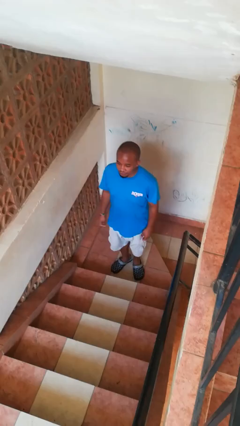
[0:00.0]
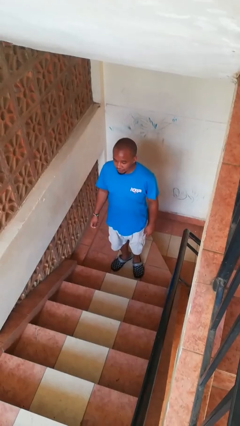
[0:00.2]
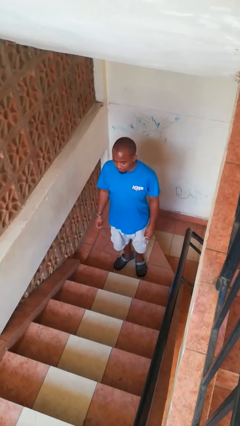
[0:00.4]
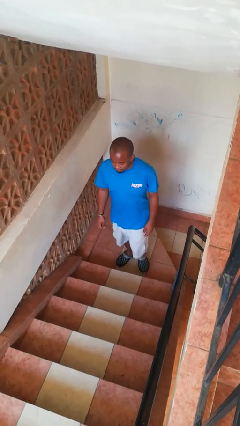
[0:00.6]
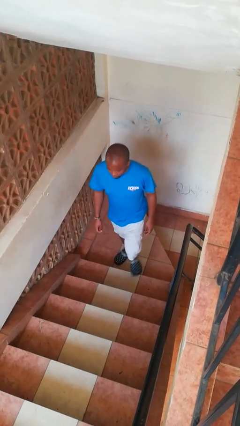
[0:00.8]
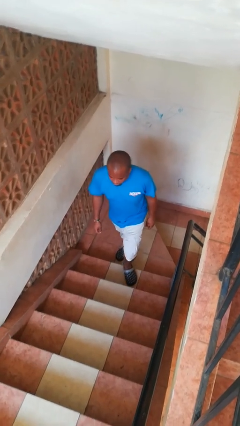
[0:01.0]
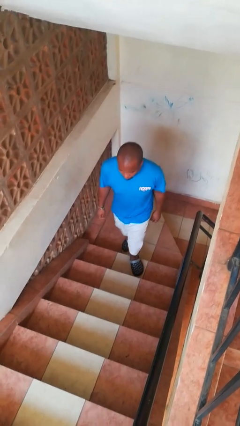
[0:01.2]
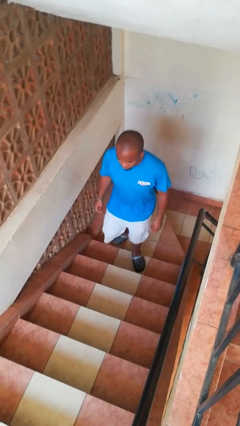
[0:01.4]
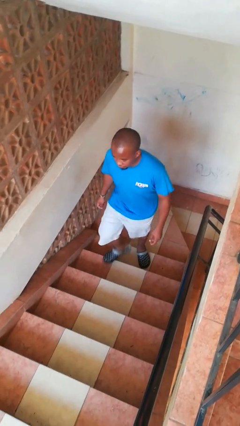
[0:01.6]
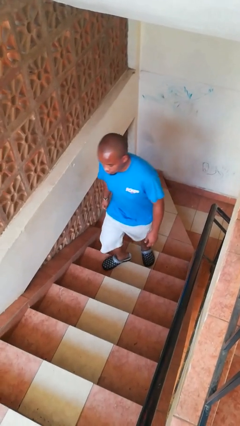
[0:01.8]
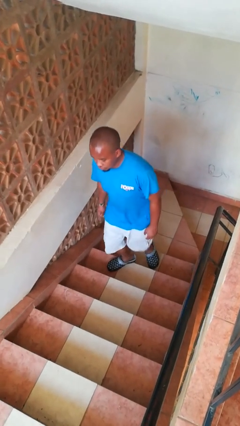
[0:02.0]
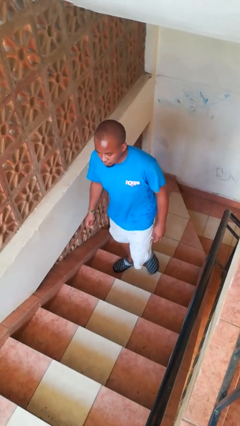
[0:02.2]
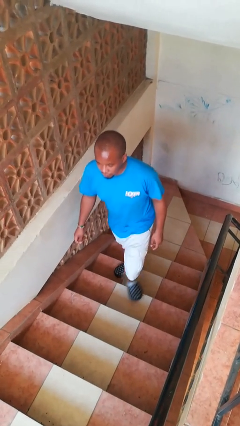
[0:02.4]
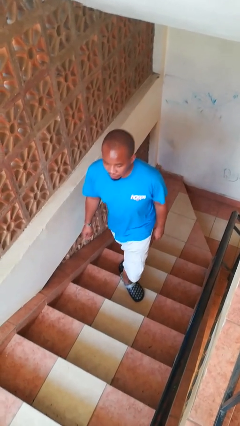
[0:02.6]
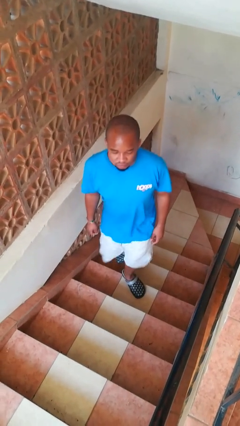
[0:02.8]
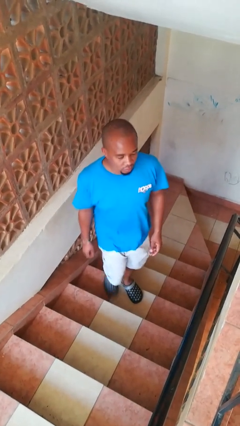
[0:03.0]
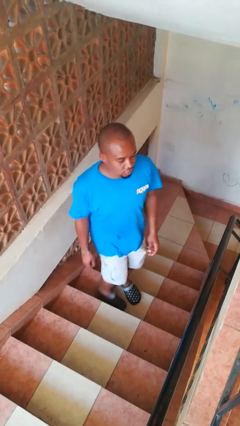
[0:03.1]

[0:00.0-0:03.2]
person climbs up stairs

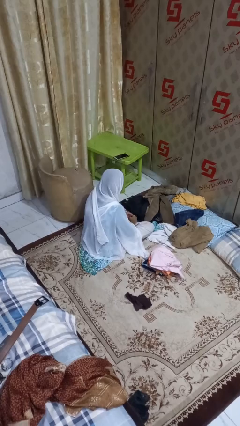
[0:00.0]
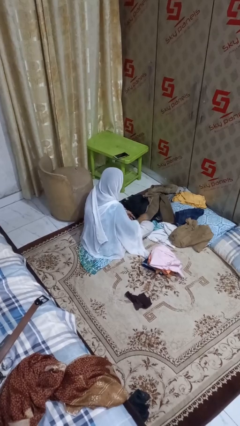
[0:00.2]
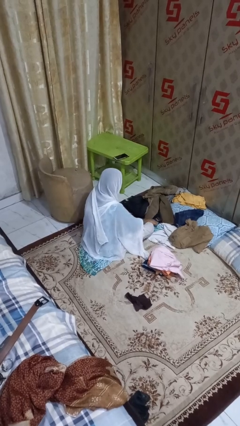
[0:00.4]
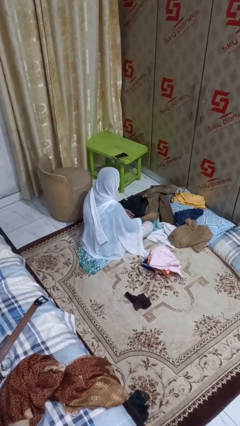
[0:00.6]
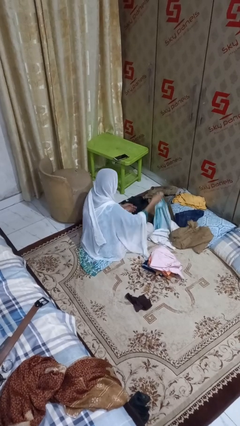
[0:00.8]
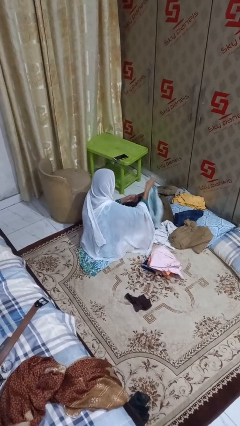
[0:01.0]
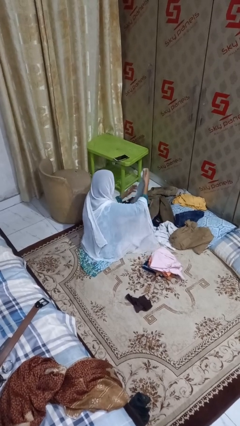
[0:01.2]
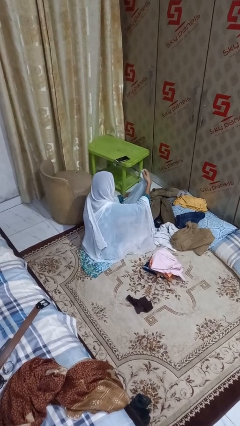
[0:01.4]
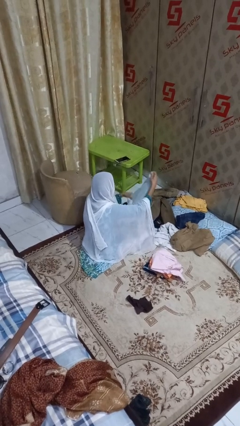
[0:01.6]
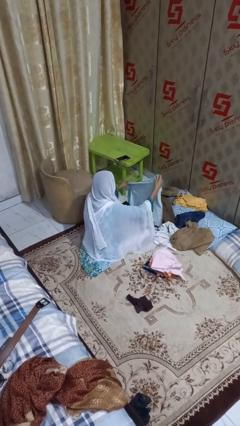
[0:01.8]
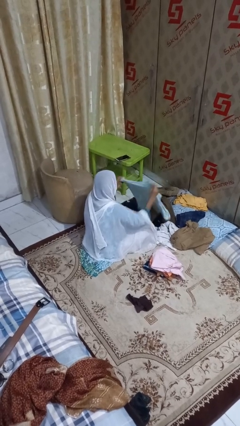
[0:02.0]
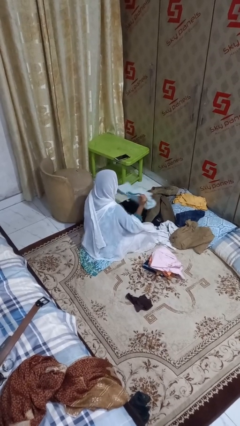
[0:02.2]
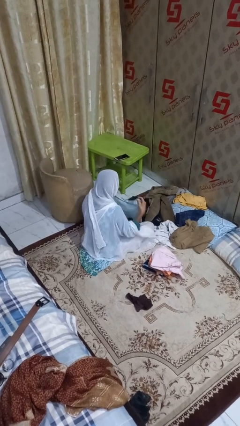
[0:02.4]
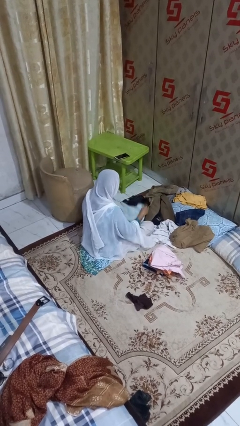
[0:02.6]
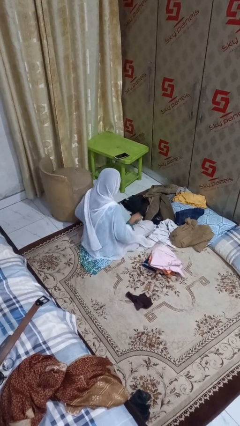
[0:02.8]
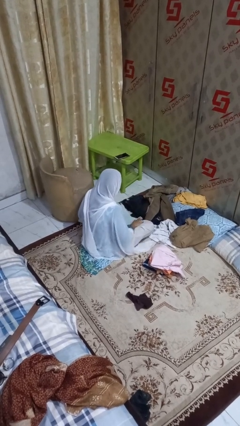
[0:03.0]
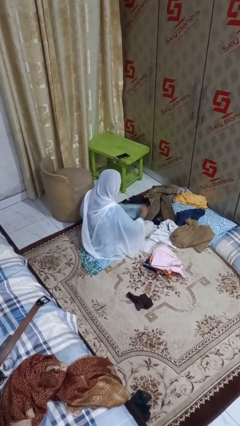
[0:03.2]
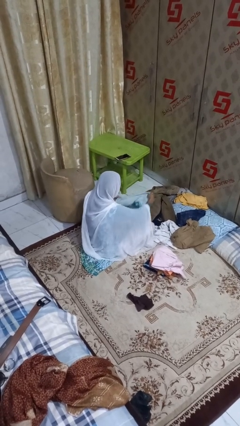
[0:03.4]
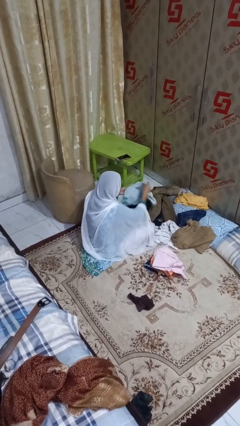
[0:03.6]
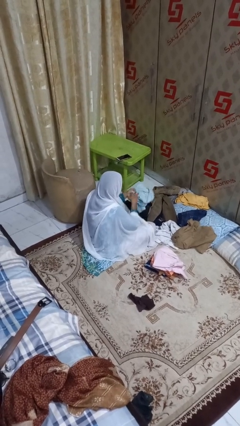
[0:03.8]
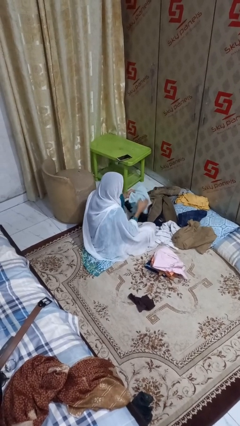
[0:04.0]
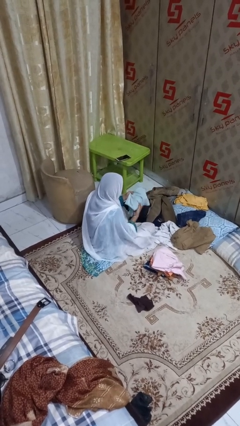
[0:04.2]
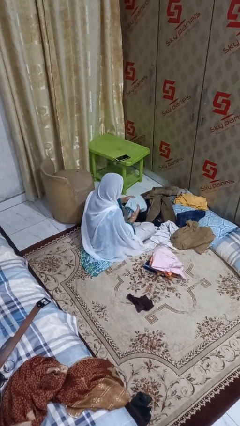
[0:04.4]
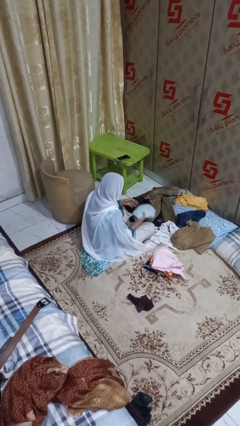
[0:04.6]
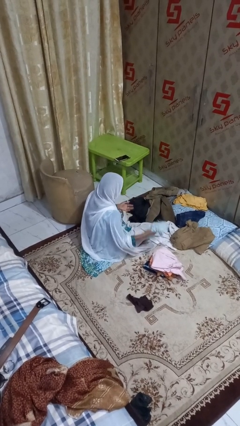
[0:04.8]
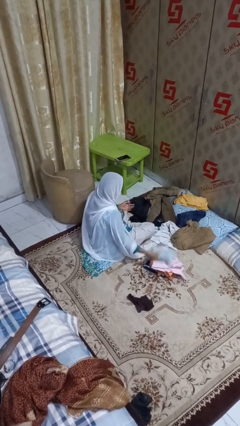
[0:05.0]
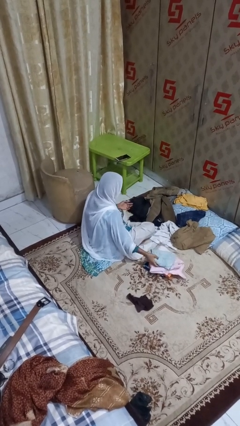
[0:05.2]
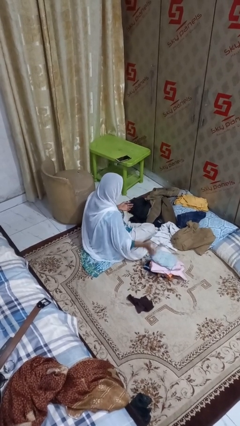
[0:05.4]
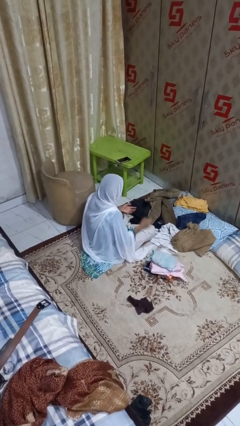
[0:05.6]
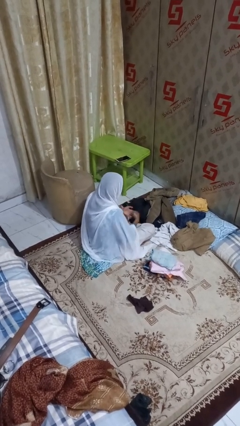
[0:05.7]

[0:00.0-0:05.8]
person folds shirt

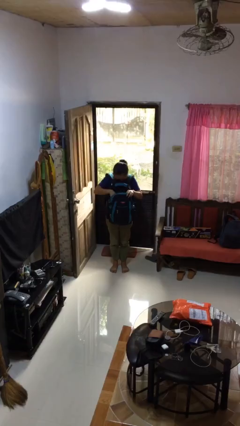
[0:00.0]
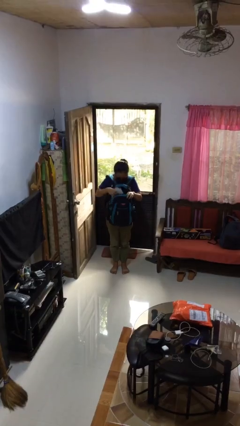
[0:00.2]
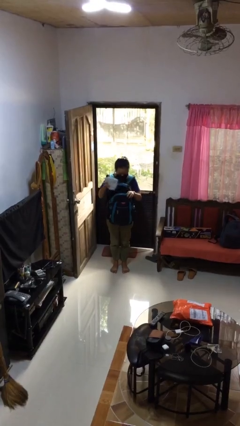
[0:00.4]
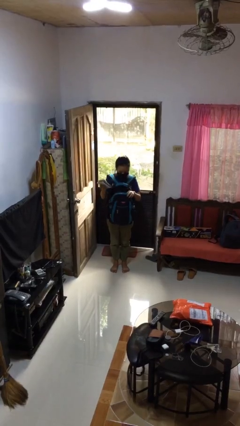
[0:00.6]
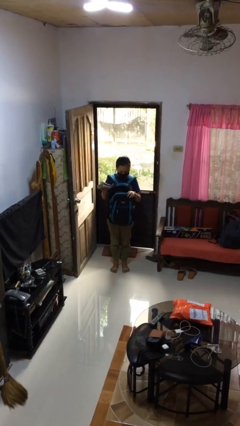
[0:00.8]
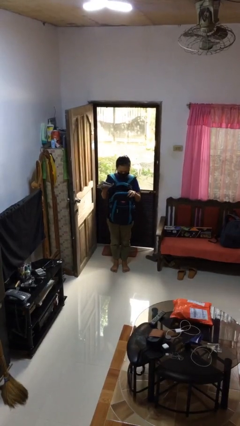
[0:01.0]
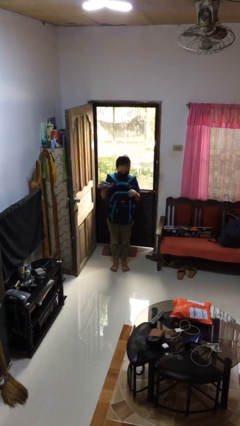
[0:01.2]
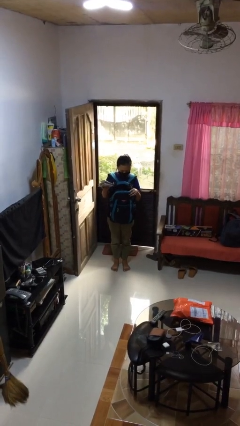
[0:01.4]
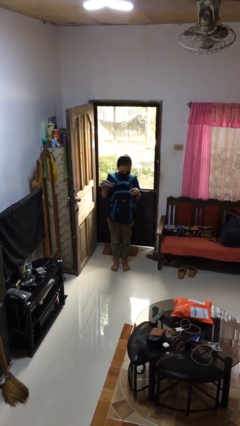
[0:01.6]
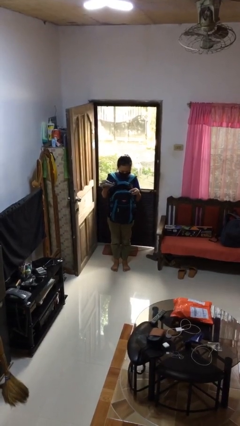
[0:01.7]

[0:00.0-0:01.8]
person takes object from backpack

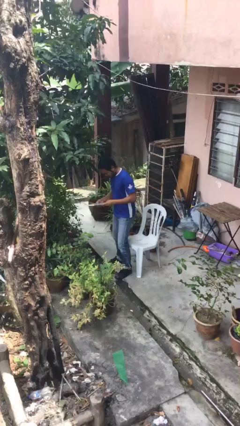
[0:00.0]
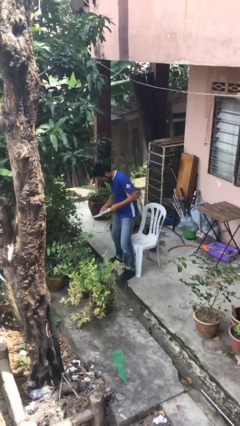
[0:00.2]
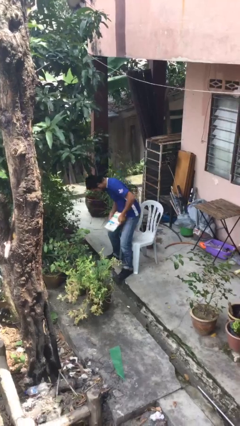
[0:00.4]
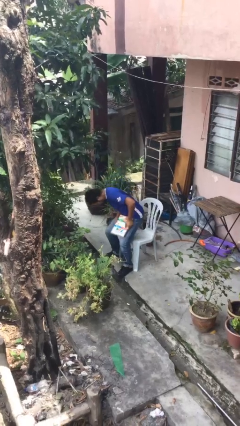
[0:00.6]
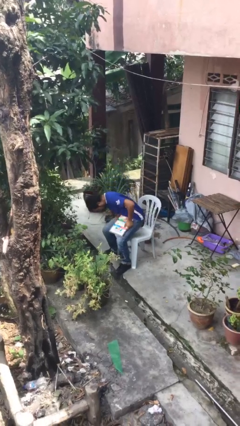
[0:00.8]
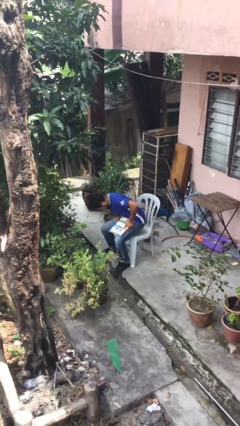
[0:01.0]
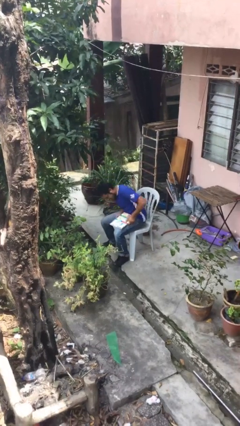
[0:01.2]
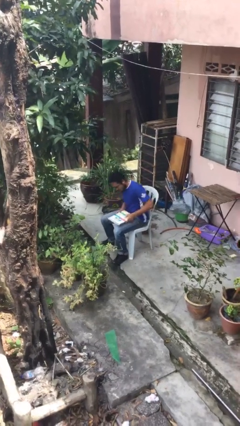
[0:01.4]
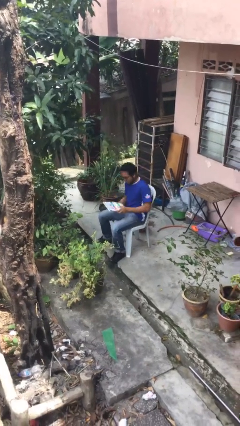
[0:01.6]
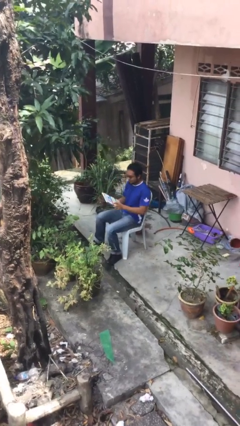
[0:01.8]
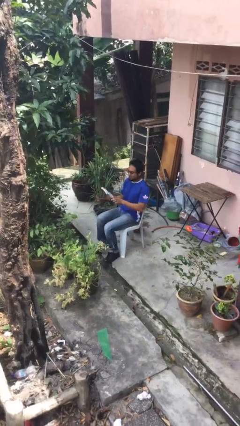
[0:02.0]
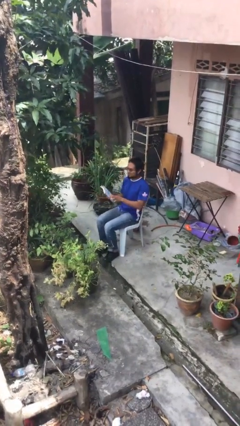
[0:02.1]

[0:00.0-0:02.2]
person sits down

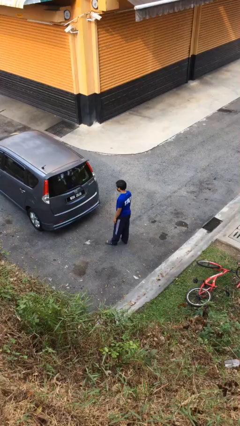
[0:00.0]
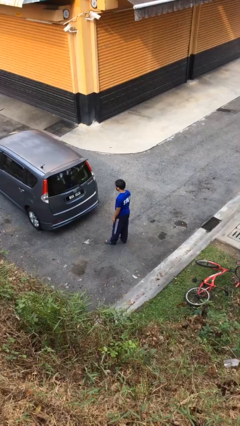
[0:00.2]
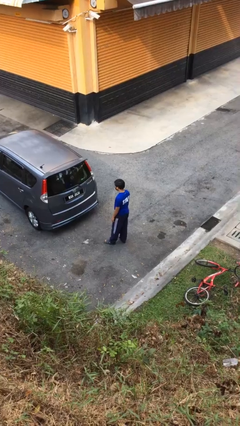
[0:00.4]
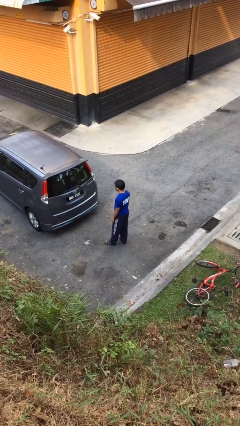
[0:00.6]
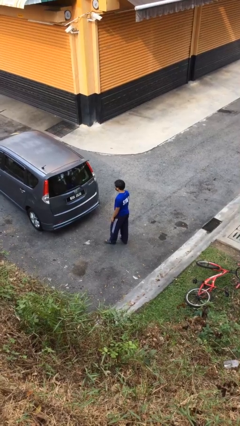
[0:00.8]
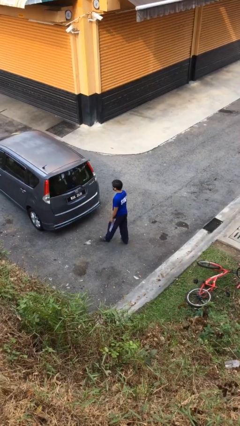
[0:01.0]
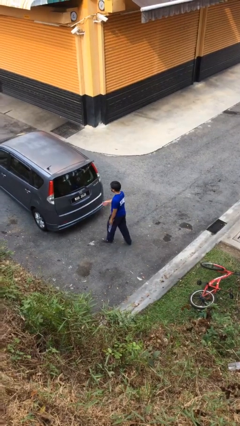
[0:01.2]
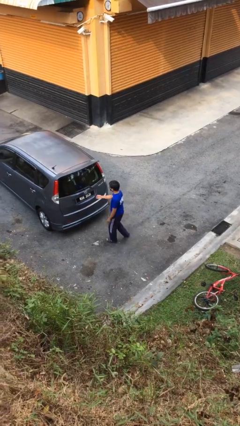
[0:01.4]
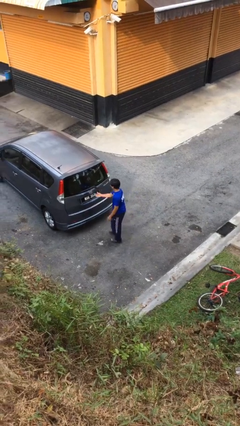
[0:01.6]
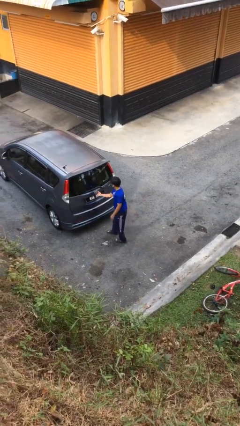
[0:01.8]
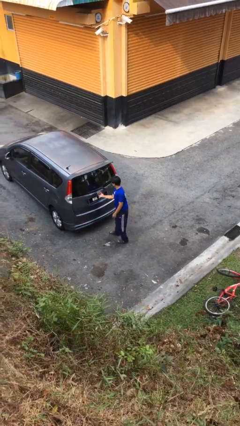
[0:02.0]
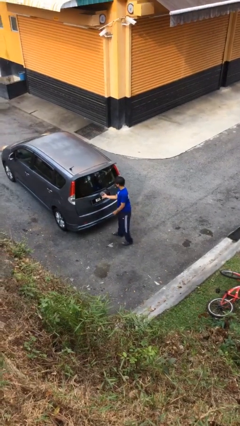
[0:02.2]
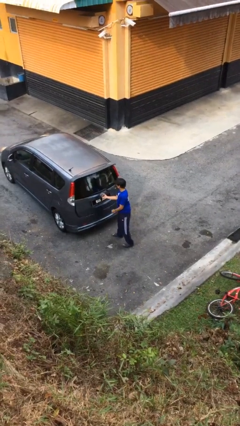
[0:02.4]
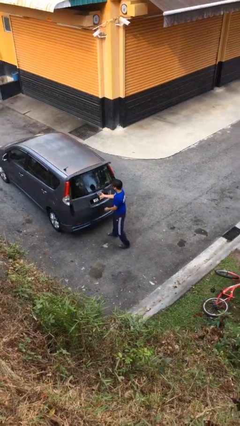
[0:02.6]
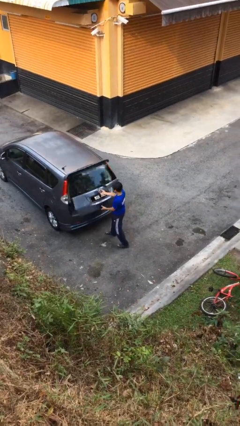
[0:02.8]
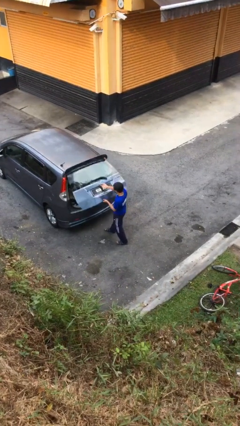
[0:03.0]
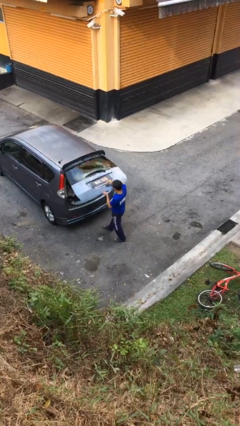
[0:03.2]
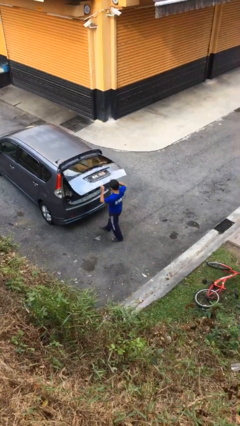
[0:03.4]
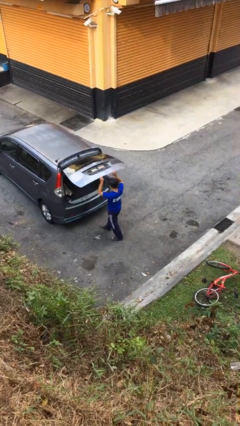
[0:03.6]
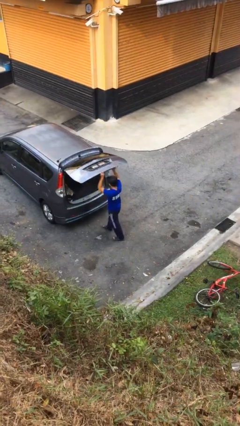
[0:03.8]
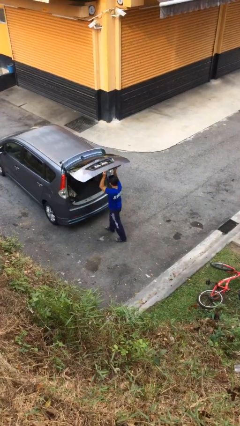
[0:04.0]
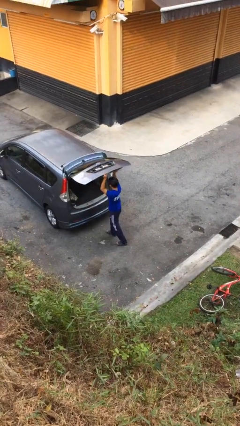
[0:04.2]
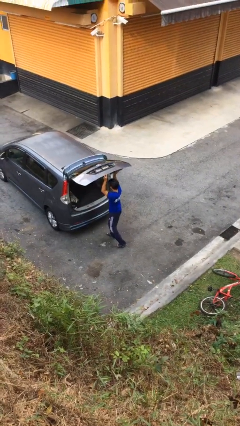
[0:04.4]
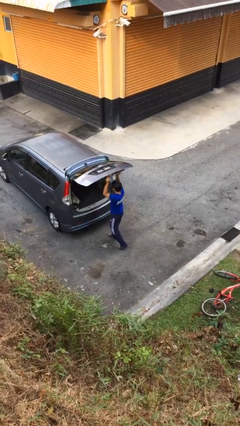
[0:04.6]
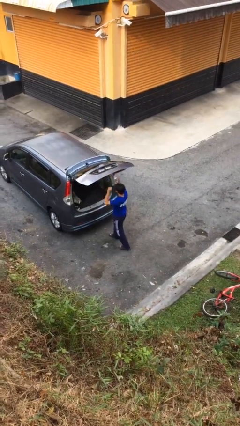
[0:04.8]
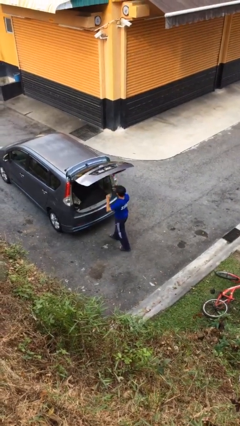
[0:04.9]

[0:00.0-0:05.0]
person opens car trunk
